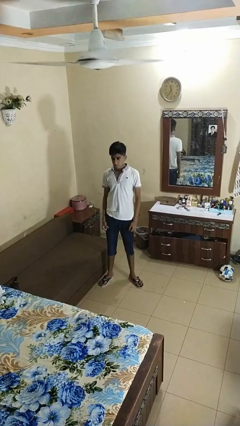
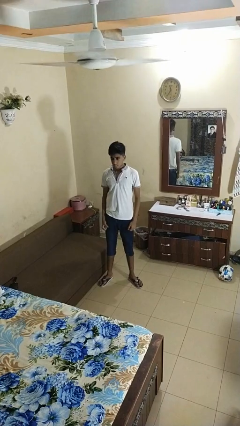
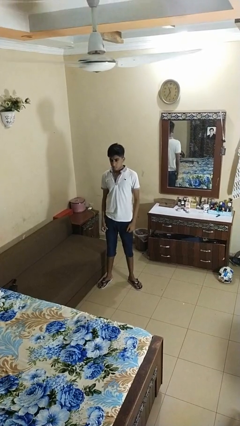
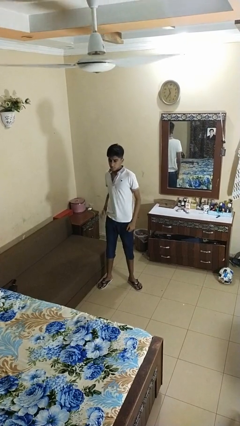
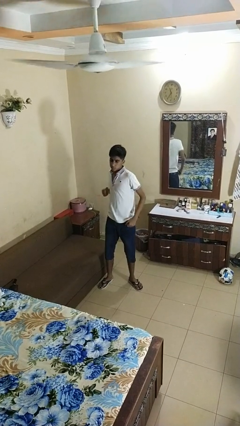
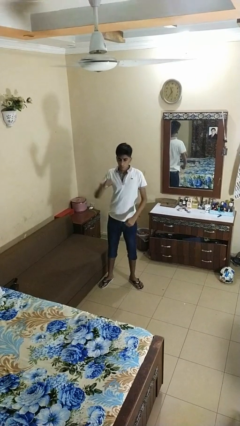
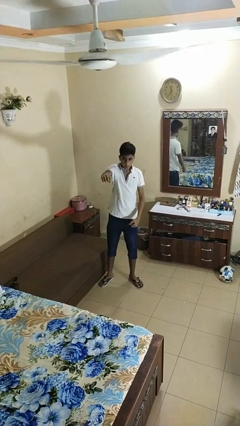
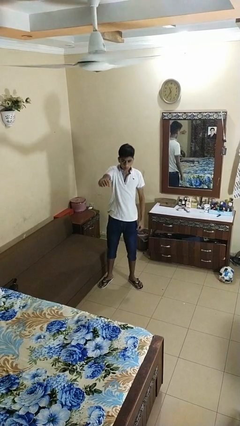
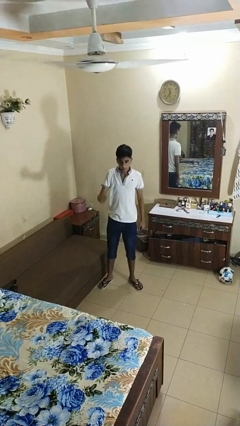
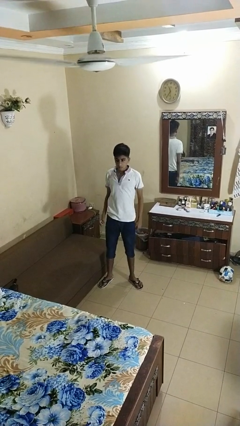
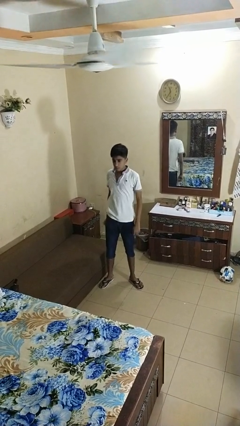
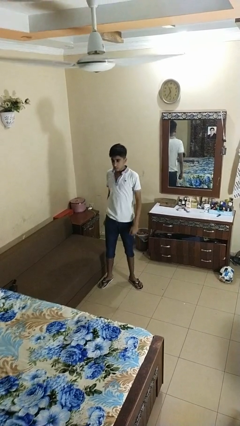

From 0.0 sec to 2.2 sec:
person punches

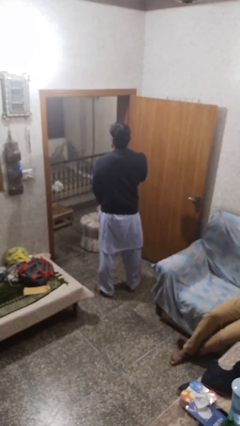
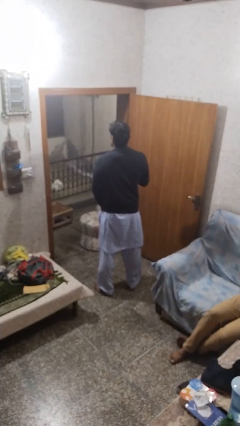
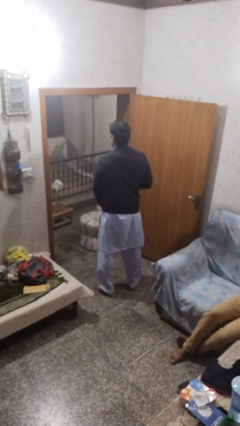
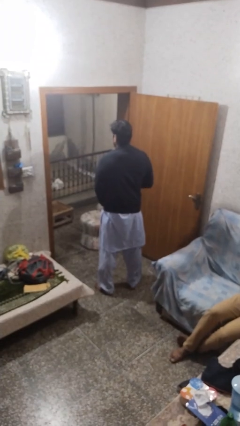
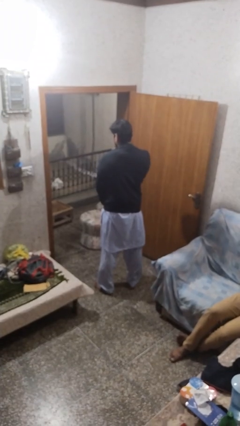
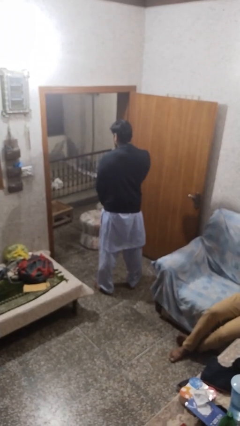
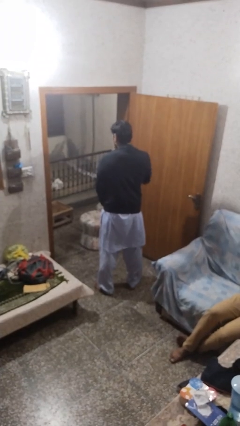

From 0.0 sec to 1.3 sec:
person unzips jacket

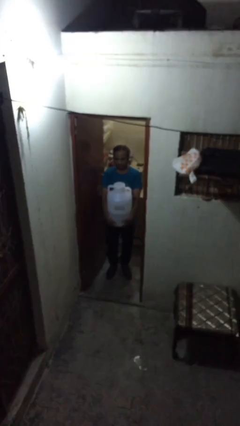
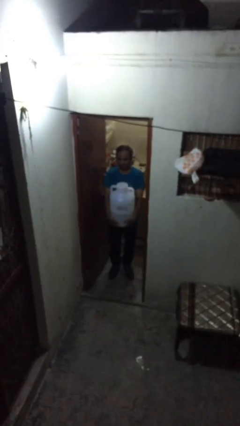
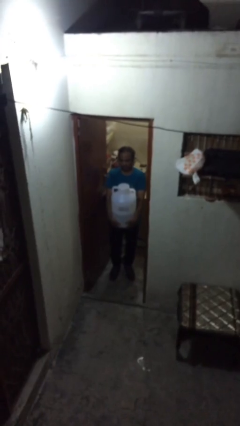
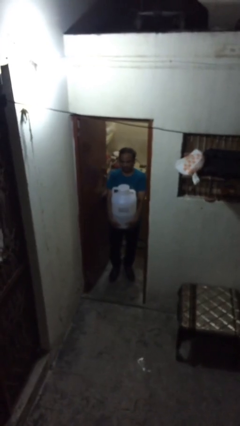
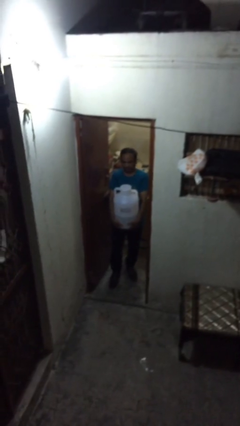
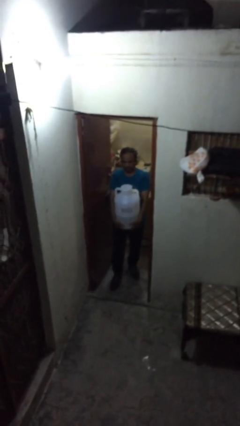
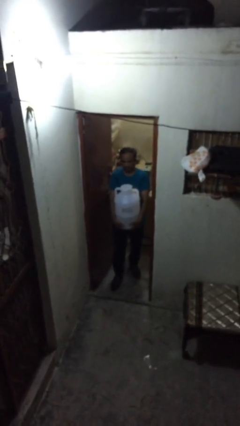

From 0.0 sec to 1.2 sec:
person carries heavy object

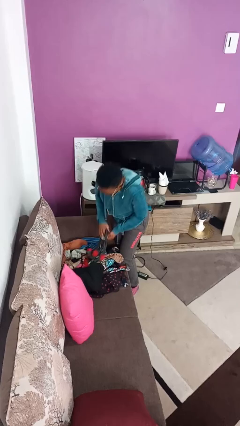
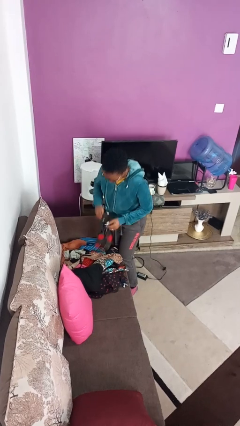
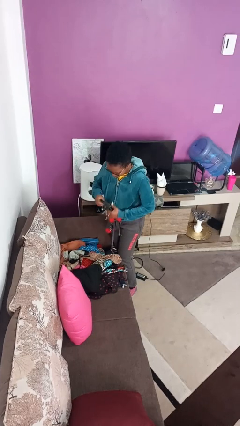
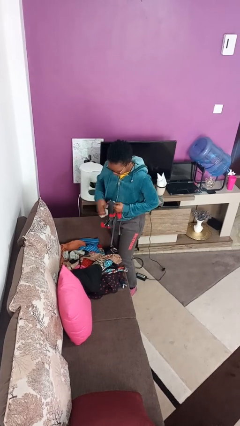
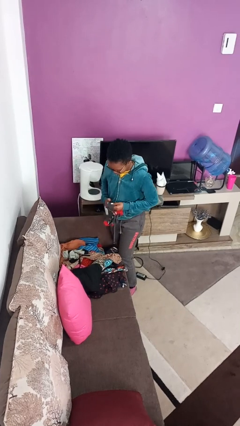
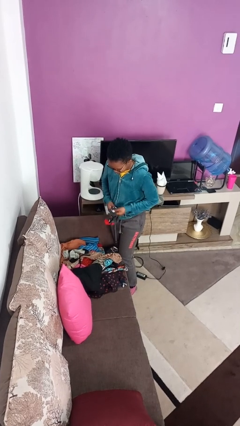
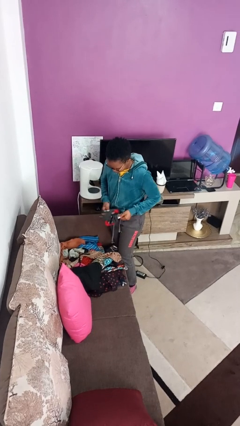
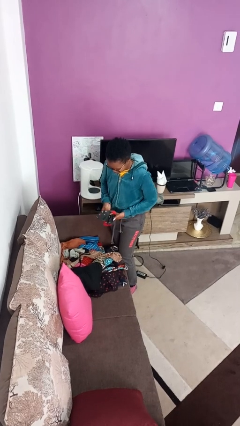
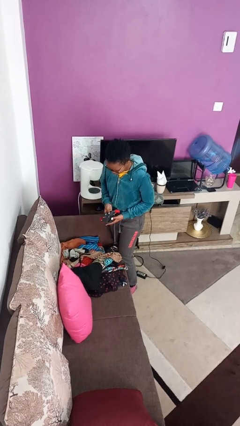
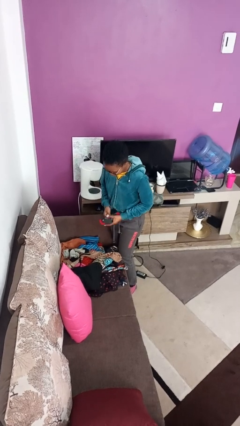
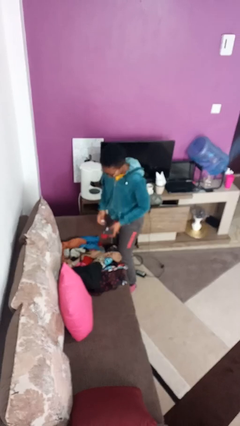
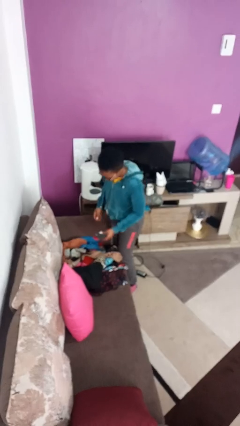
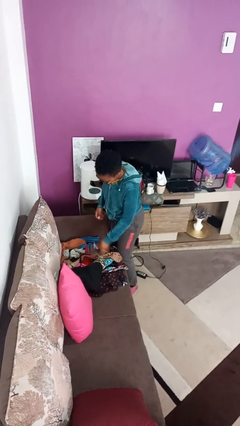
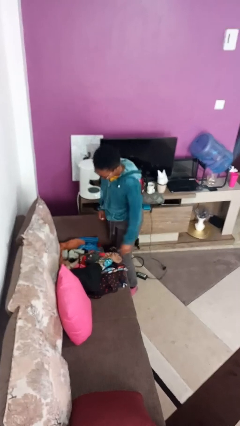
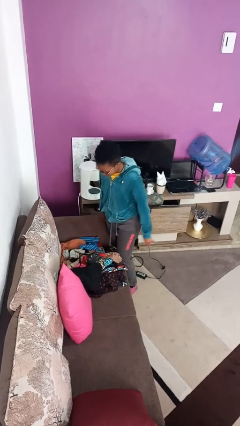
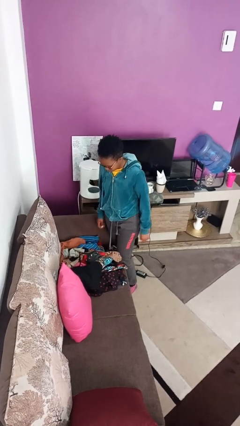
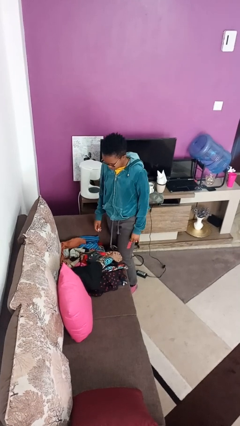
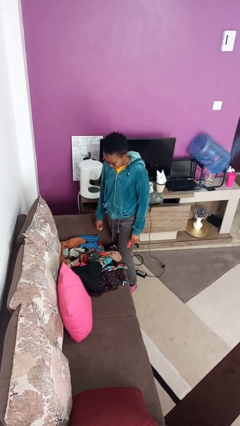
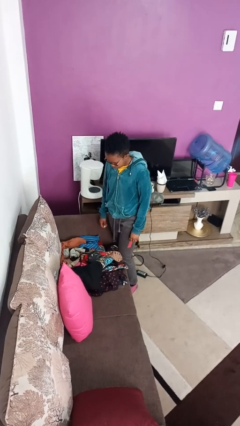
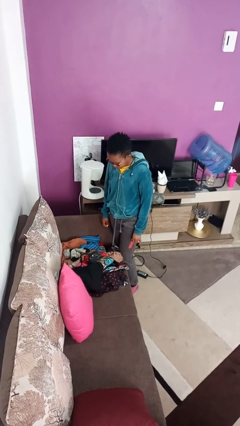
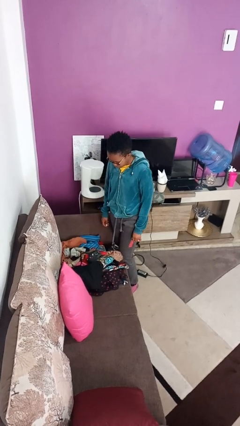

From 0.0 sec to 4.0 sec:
person folds socks

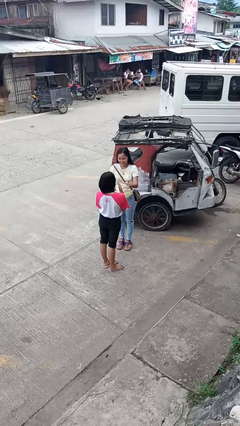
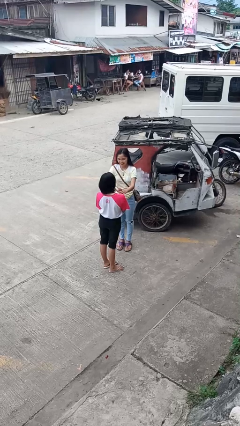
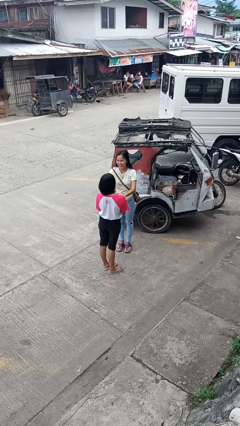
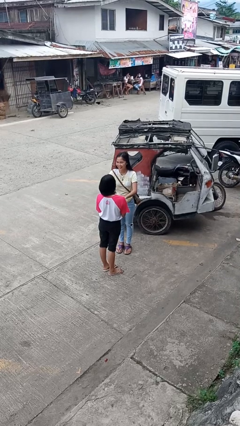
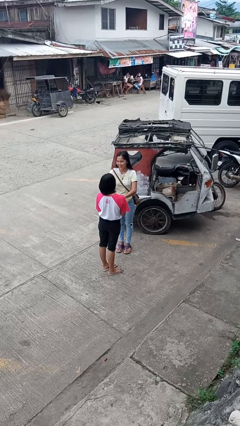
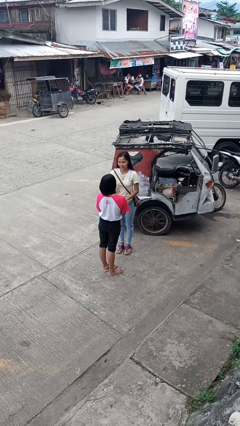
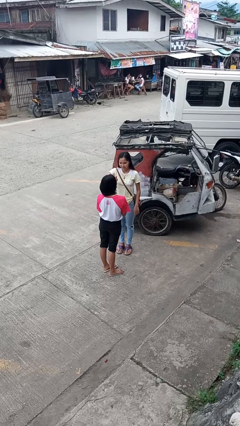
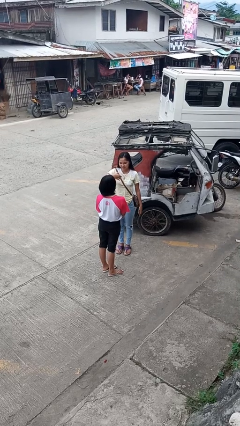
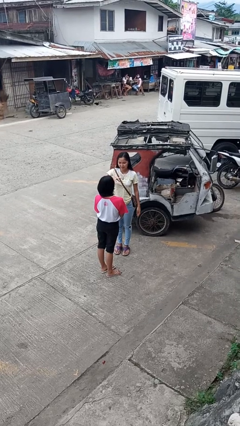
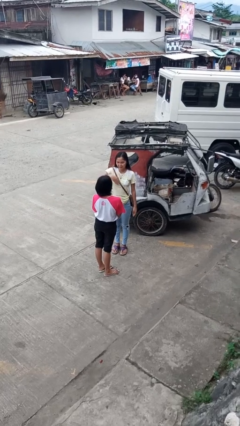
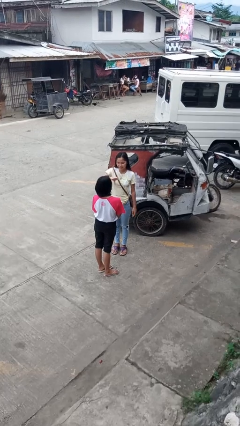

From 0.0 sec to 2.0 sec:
person shoves person

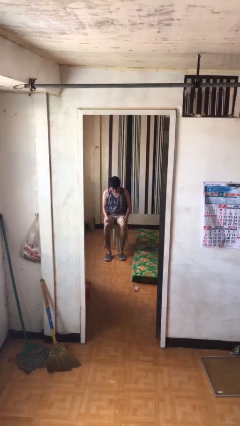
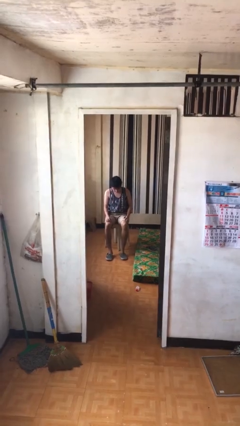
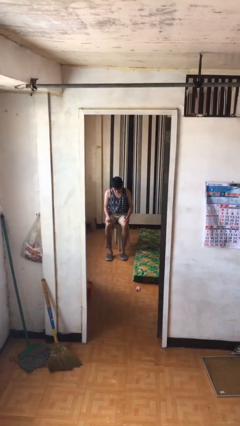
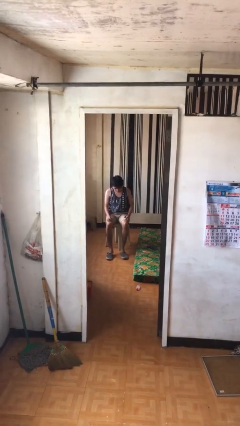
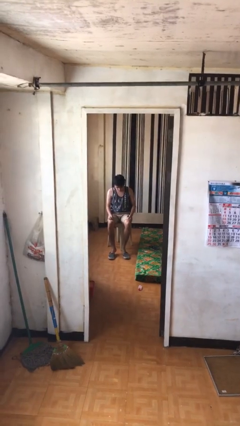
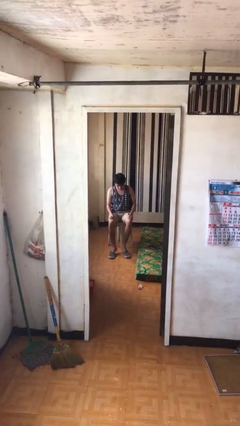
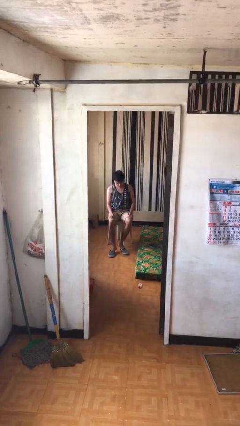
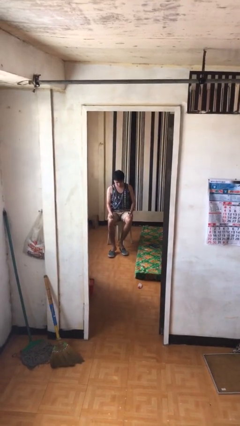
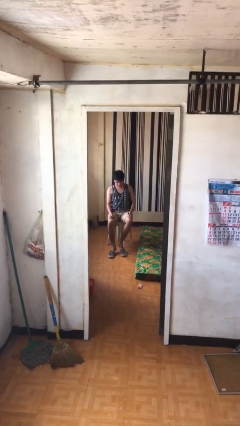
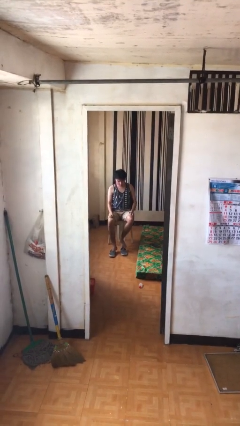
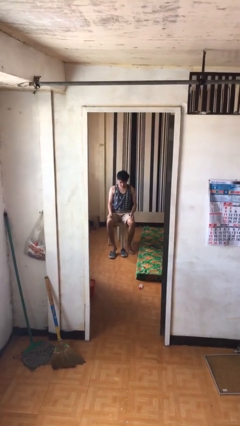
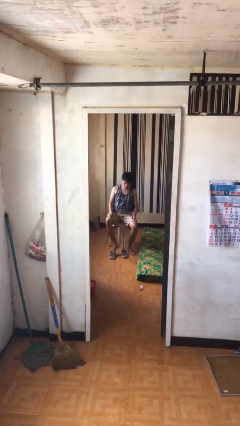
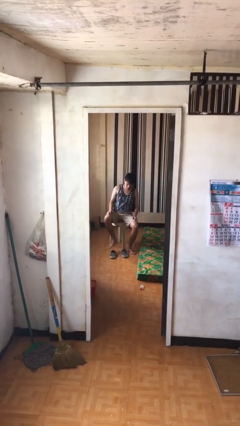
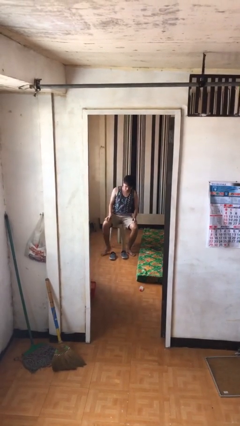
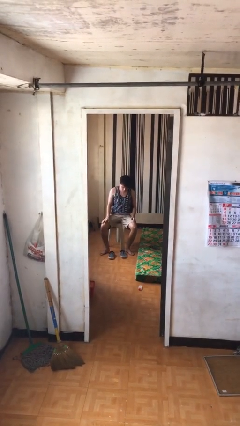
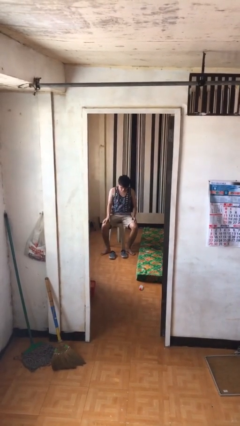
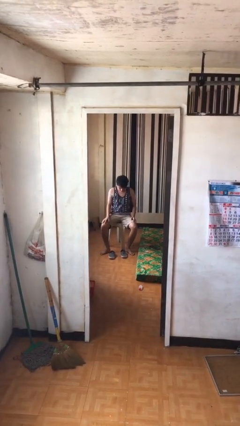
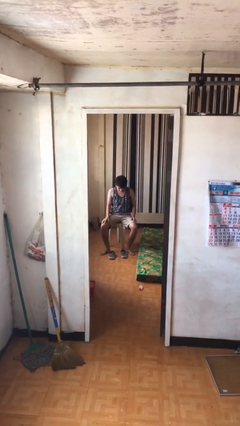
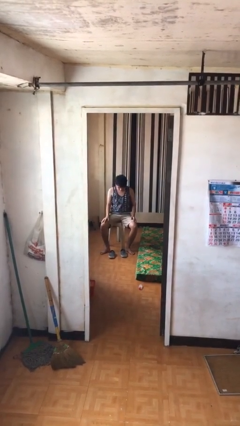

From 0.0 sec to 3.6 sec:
person takes off shoes

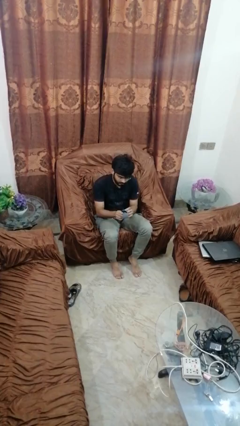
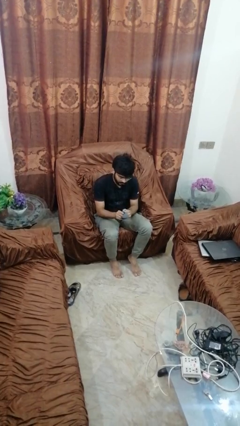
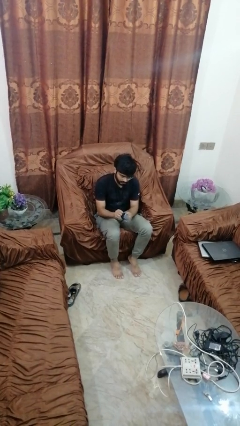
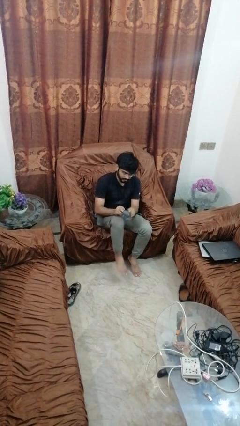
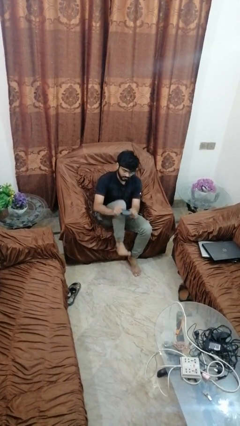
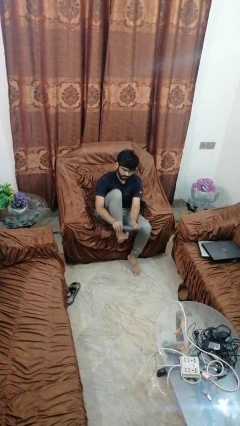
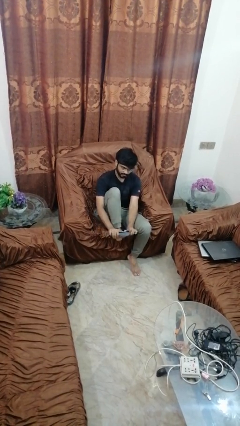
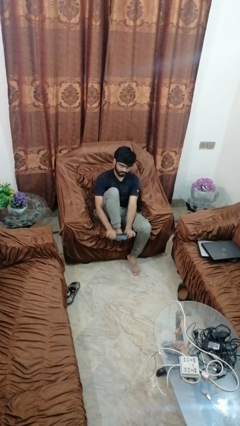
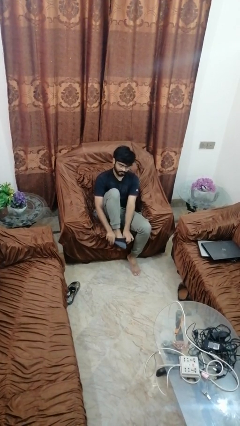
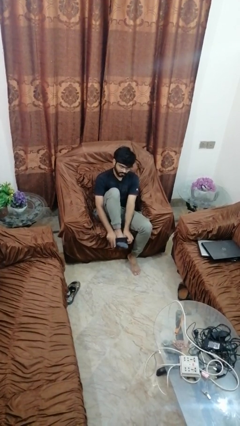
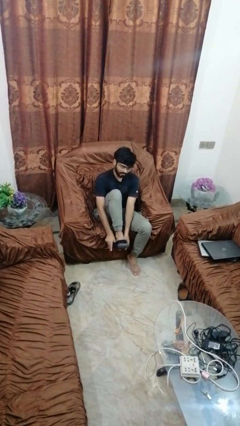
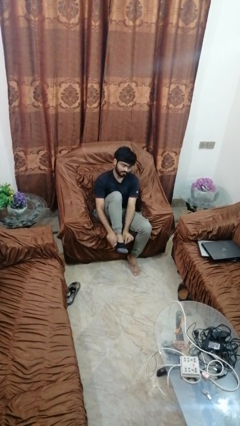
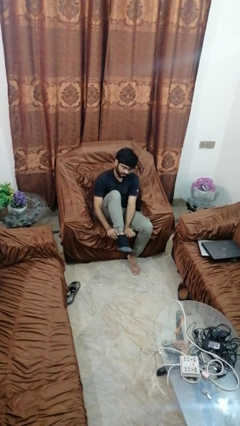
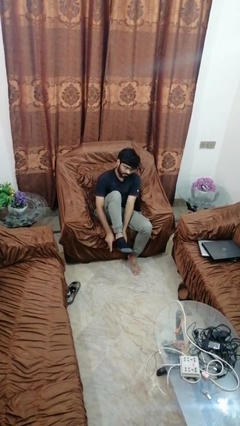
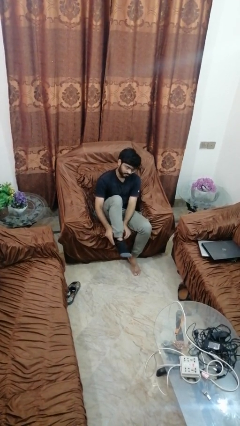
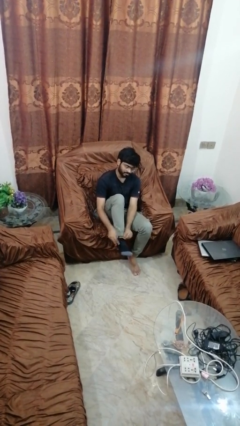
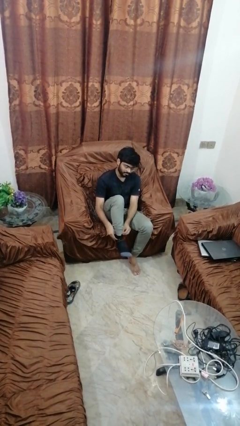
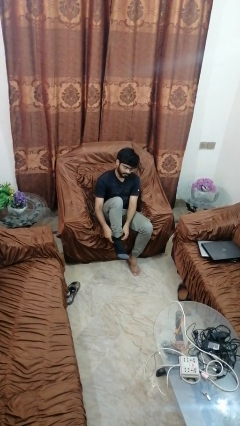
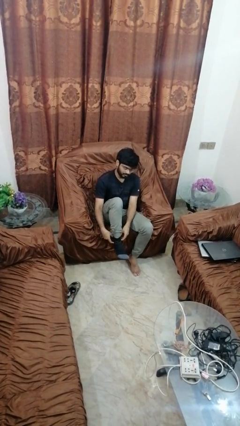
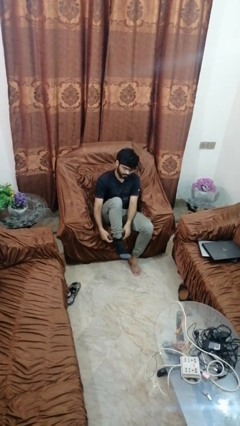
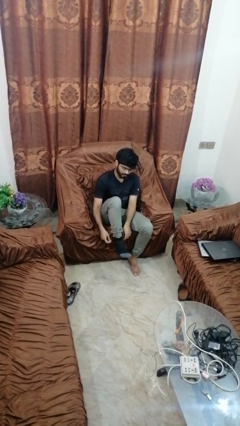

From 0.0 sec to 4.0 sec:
person puts on socks
